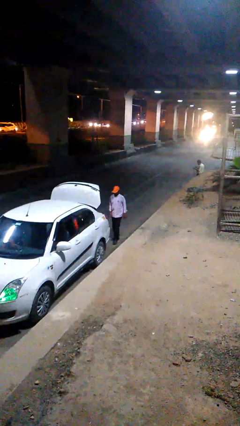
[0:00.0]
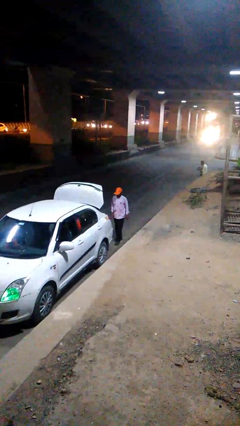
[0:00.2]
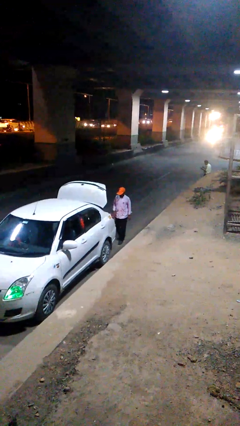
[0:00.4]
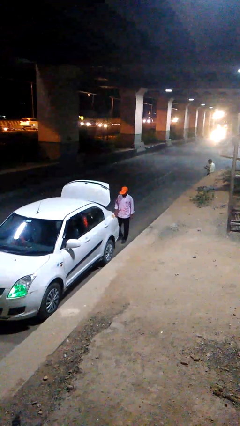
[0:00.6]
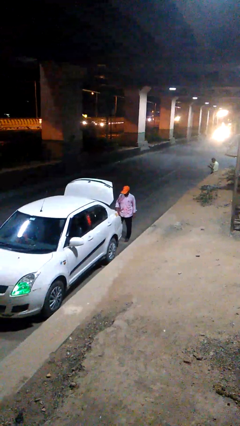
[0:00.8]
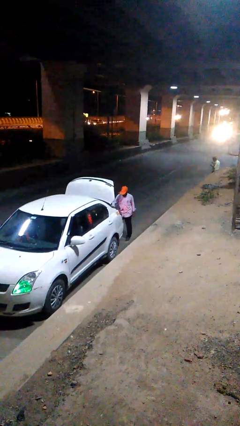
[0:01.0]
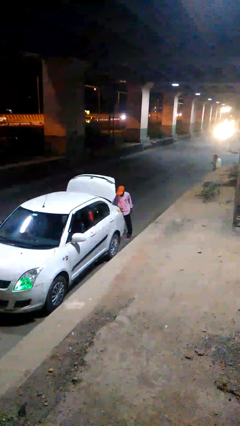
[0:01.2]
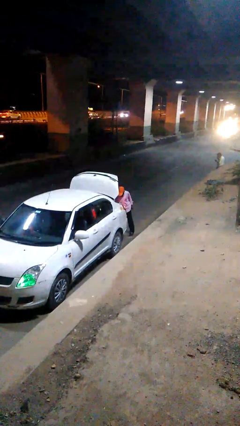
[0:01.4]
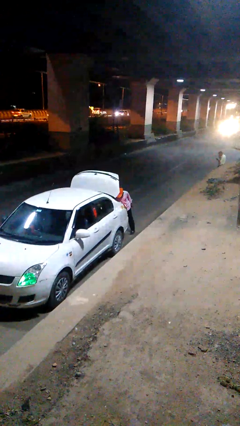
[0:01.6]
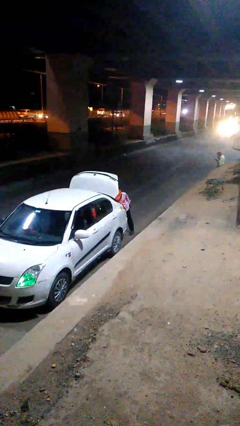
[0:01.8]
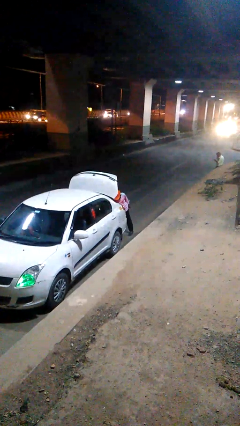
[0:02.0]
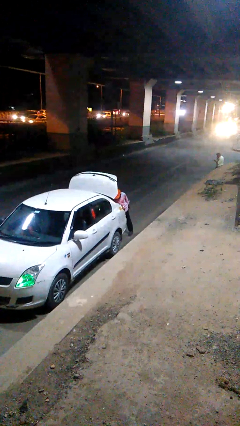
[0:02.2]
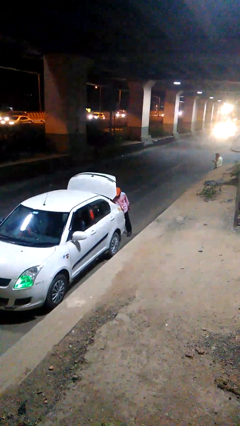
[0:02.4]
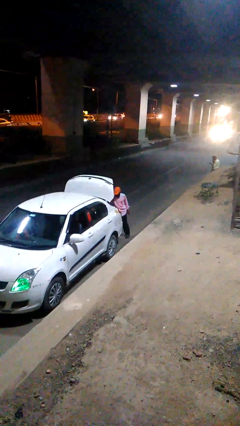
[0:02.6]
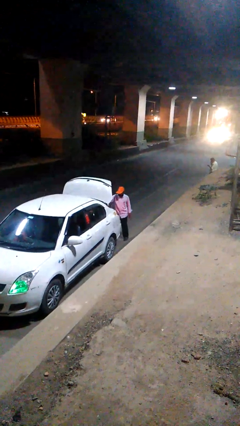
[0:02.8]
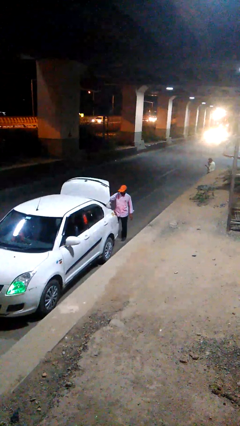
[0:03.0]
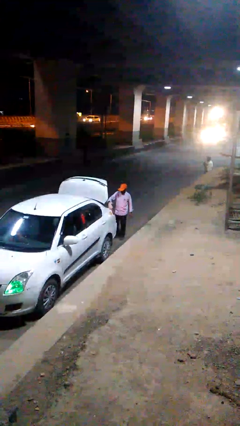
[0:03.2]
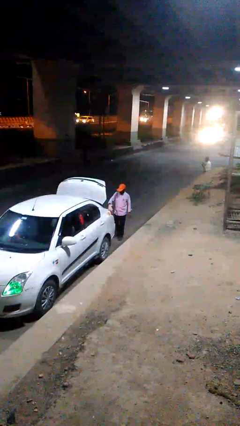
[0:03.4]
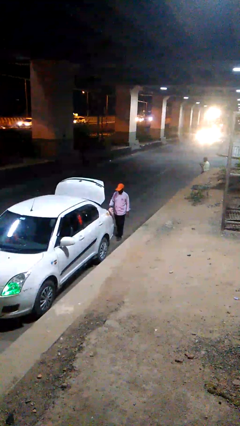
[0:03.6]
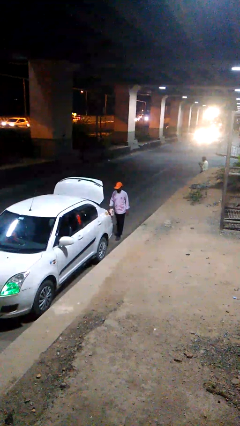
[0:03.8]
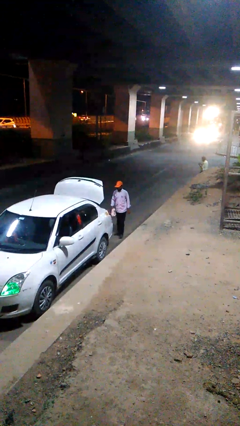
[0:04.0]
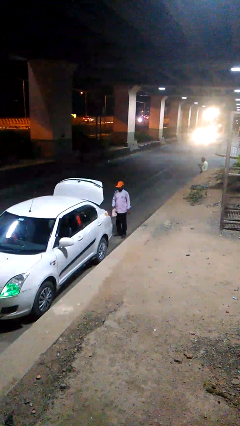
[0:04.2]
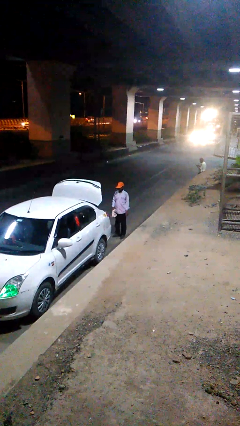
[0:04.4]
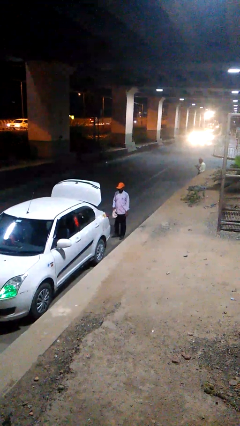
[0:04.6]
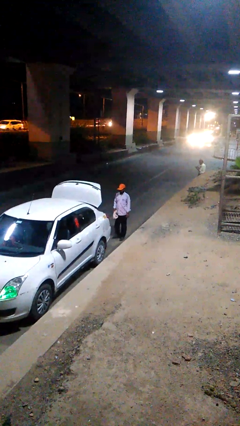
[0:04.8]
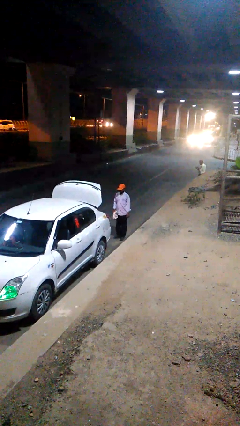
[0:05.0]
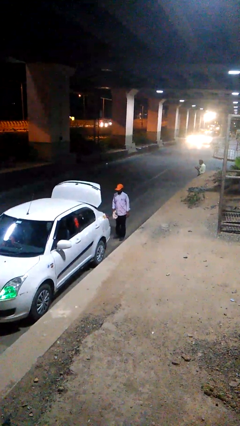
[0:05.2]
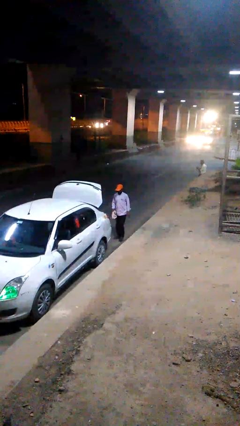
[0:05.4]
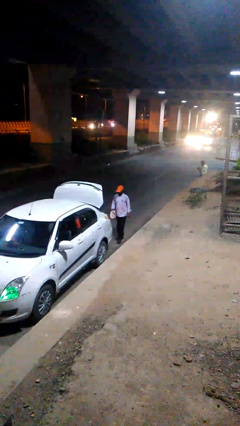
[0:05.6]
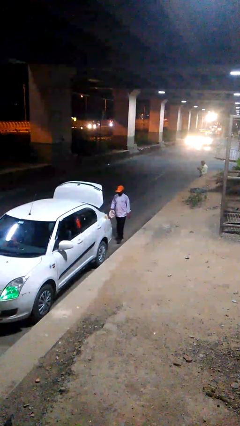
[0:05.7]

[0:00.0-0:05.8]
person unloads car

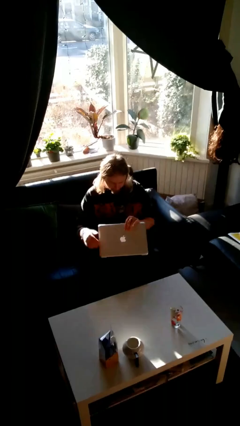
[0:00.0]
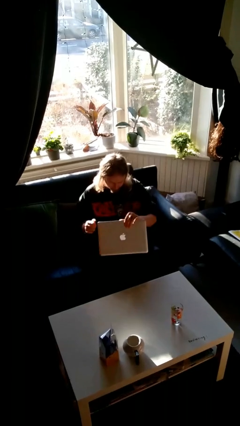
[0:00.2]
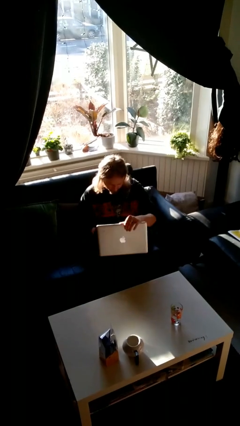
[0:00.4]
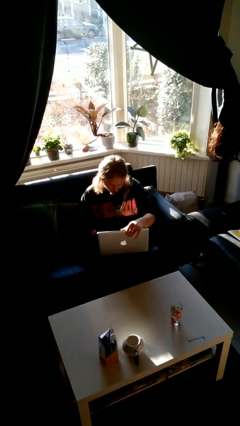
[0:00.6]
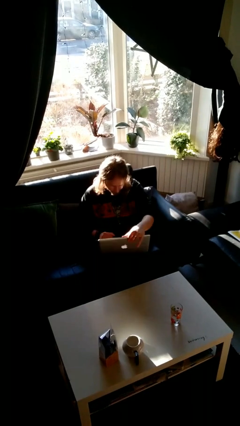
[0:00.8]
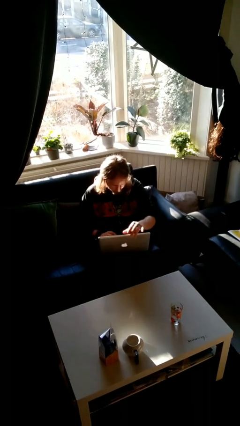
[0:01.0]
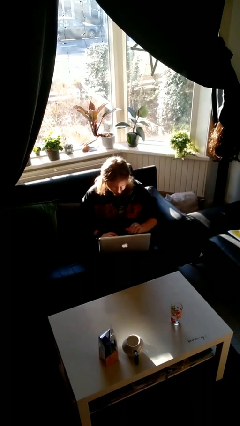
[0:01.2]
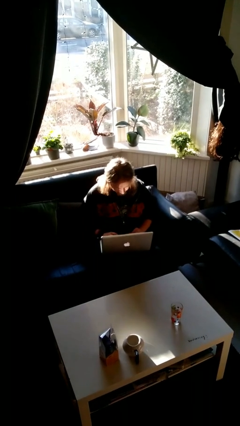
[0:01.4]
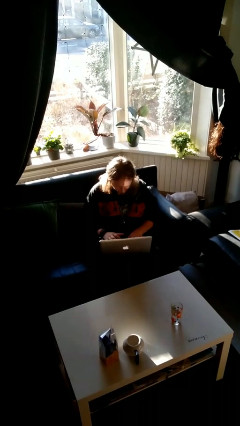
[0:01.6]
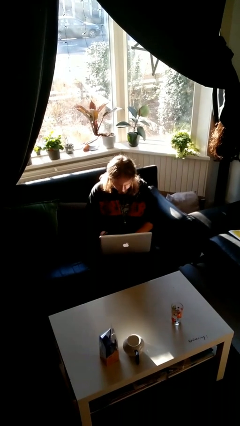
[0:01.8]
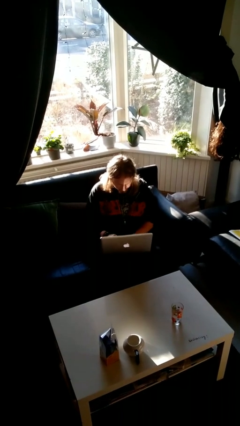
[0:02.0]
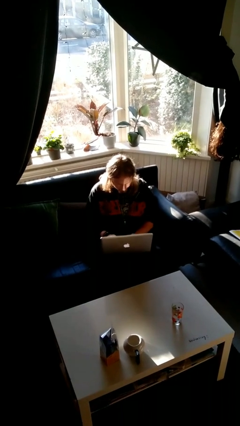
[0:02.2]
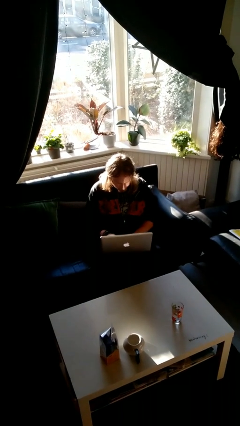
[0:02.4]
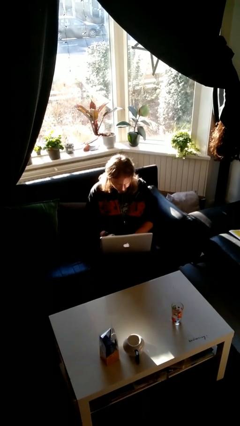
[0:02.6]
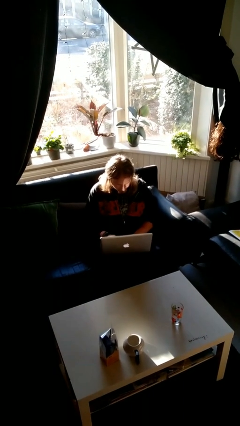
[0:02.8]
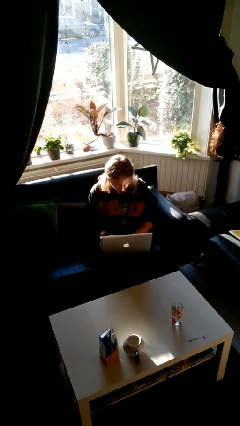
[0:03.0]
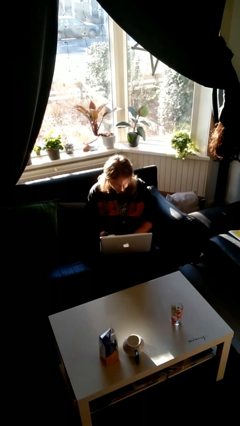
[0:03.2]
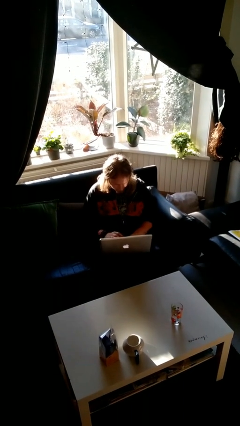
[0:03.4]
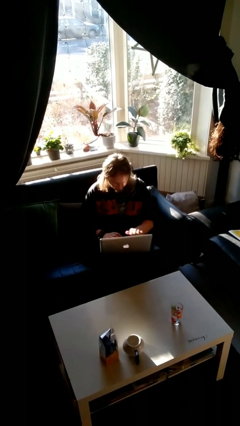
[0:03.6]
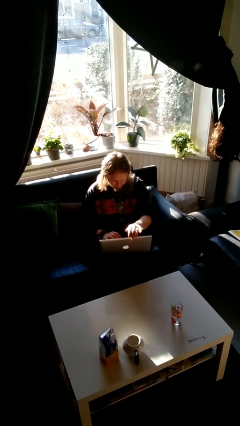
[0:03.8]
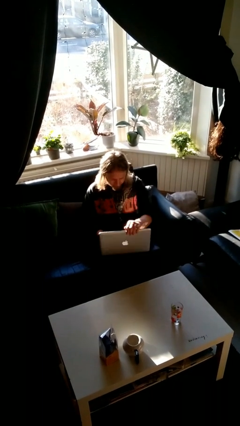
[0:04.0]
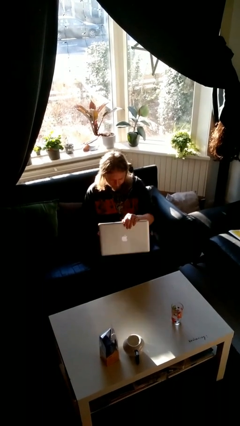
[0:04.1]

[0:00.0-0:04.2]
person interacts with laptop

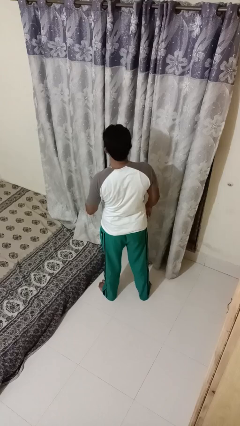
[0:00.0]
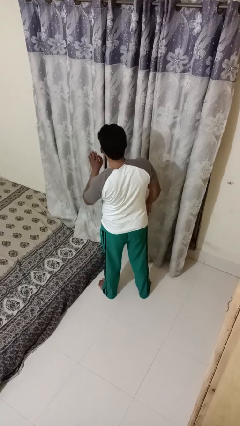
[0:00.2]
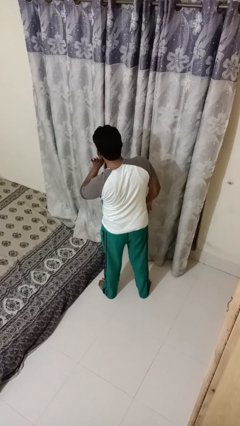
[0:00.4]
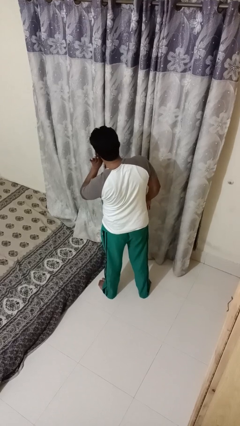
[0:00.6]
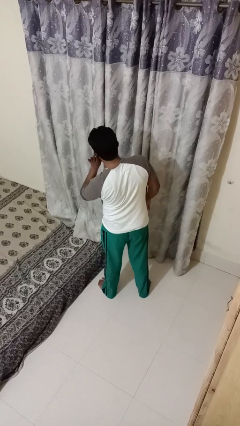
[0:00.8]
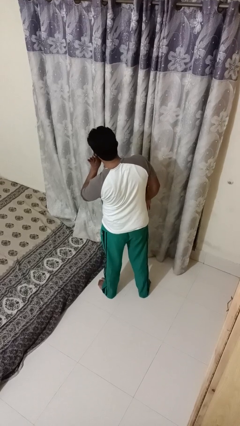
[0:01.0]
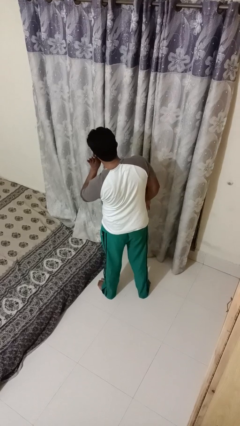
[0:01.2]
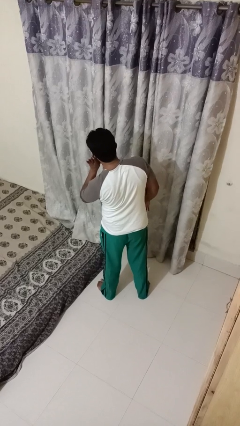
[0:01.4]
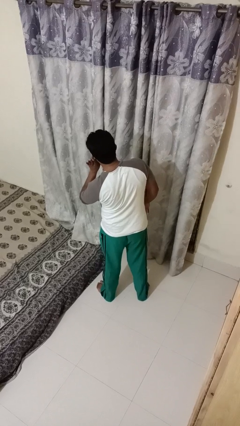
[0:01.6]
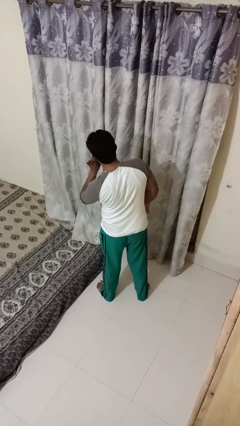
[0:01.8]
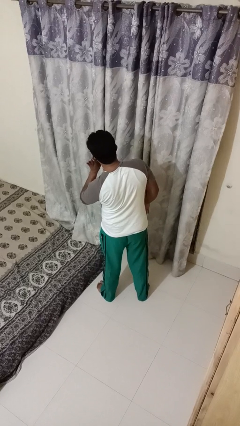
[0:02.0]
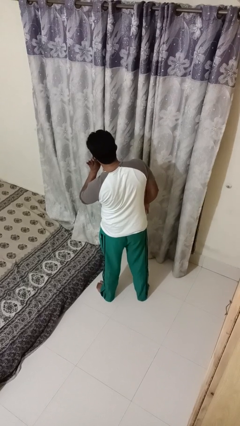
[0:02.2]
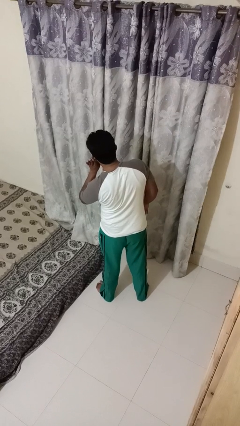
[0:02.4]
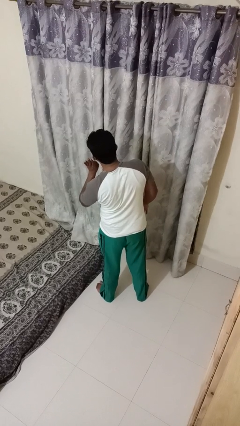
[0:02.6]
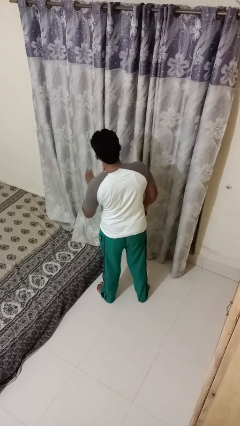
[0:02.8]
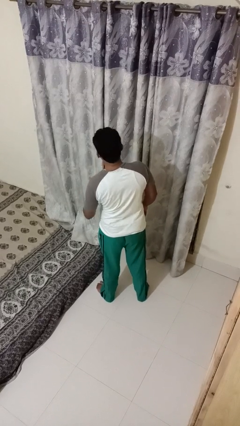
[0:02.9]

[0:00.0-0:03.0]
person gestures listen closely

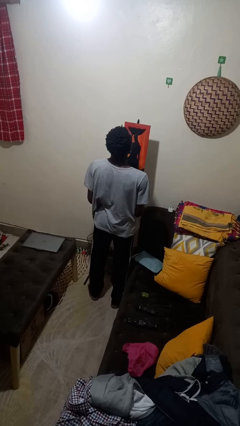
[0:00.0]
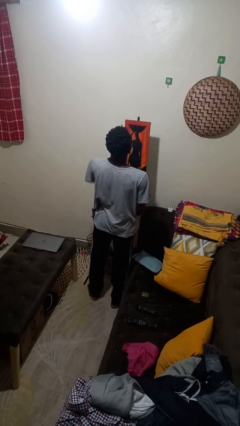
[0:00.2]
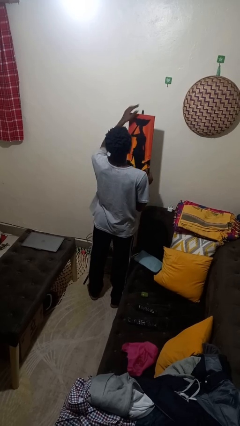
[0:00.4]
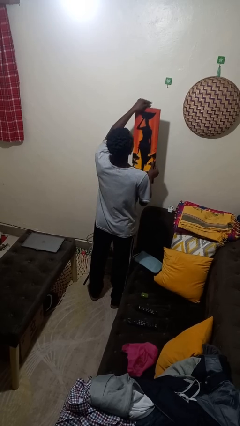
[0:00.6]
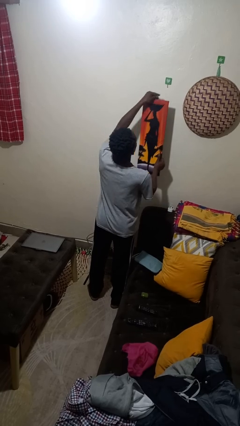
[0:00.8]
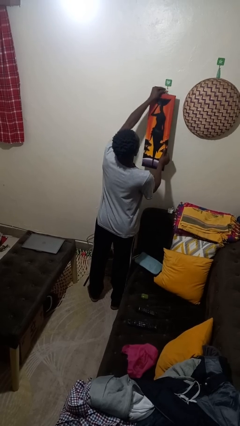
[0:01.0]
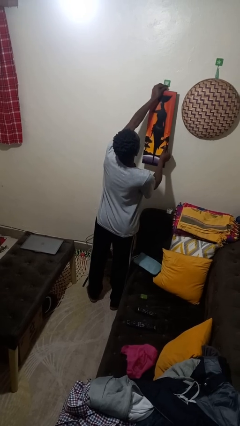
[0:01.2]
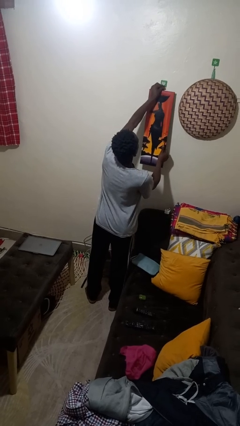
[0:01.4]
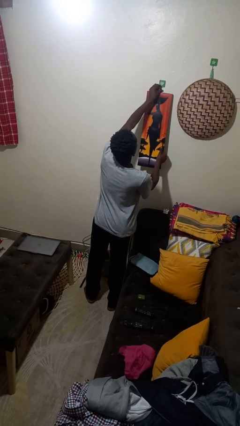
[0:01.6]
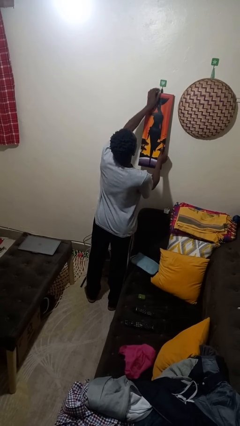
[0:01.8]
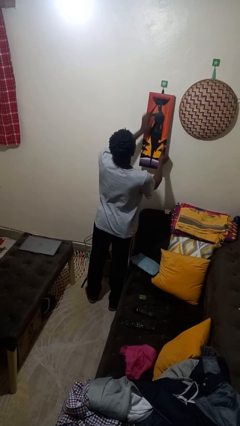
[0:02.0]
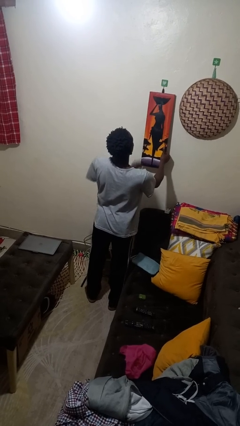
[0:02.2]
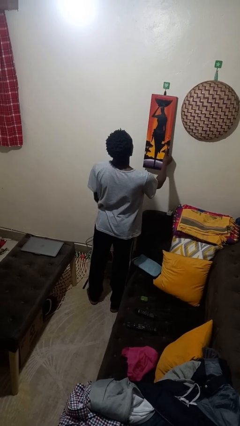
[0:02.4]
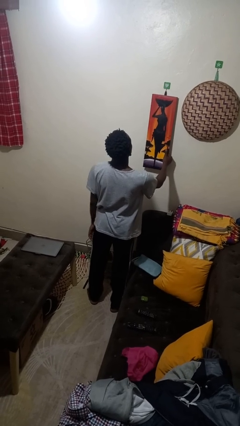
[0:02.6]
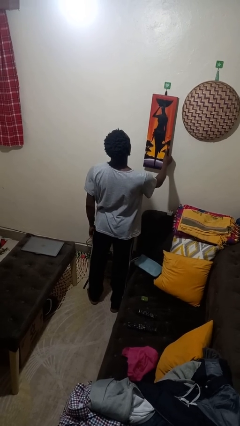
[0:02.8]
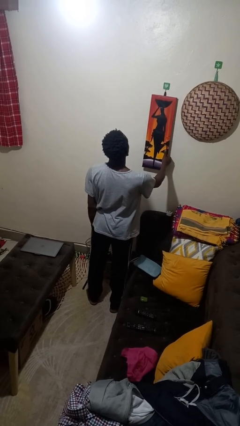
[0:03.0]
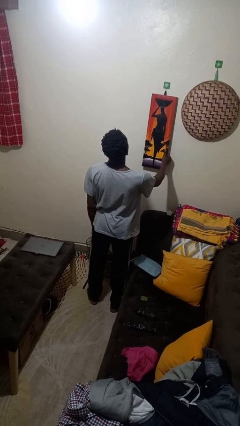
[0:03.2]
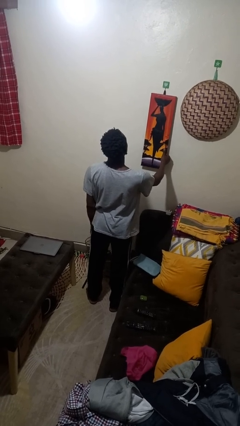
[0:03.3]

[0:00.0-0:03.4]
person puts up picture frame

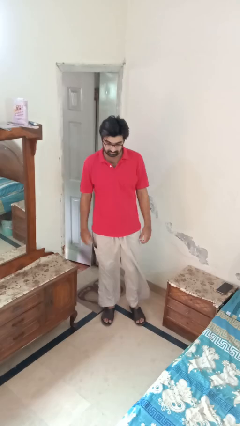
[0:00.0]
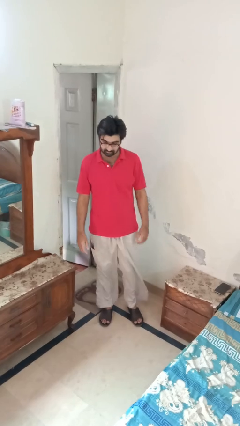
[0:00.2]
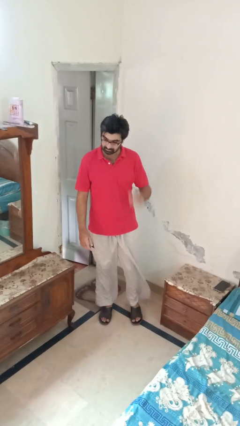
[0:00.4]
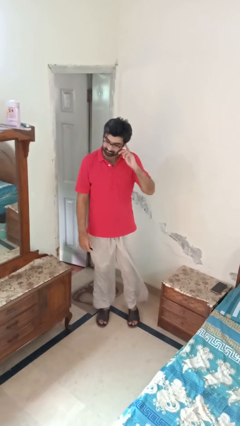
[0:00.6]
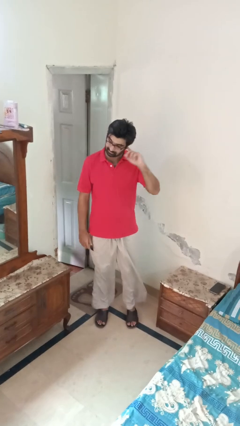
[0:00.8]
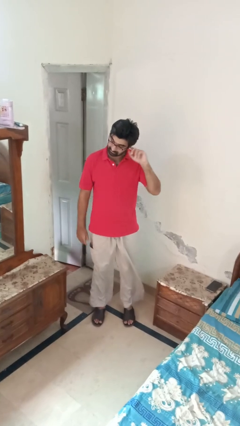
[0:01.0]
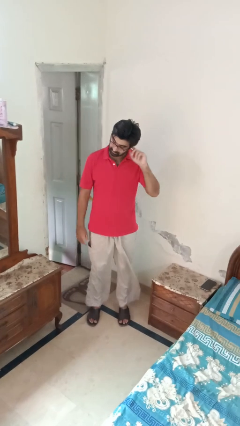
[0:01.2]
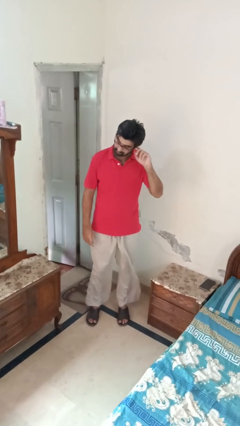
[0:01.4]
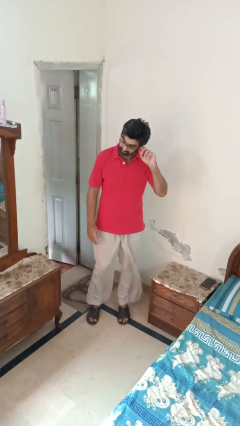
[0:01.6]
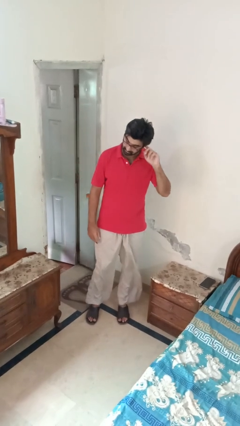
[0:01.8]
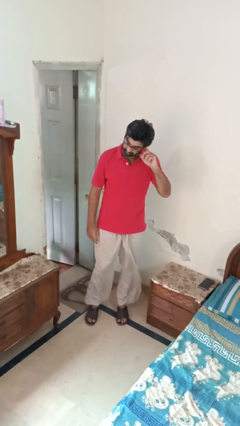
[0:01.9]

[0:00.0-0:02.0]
person touches earlobe
